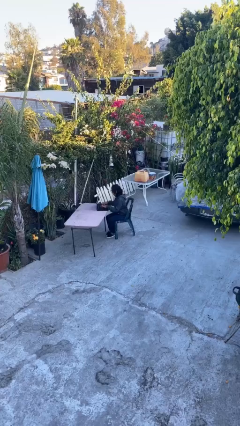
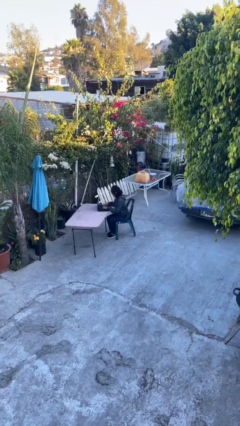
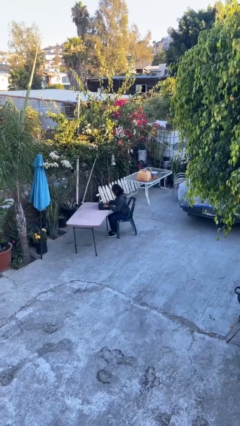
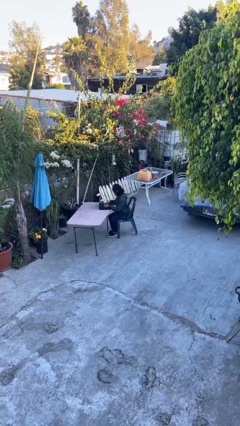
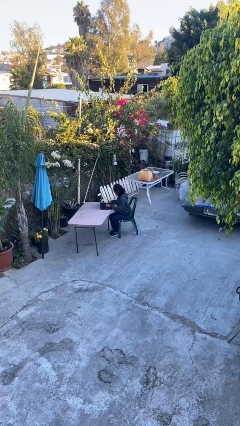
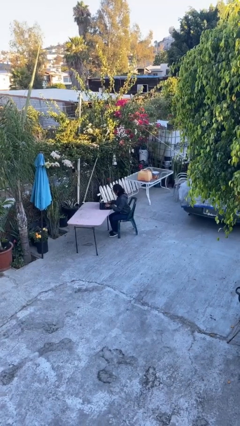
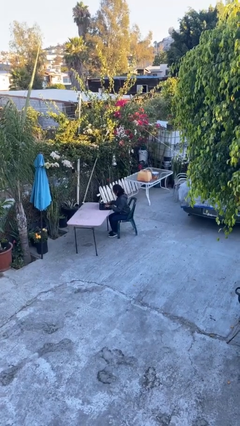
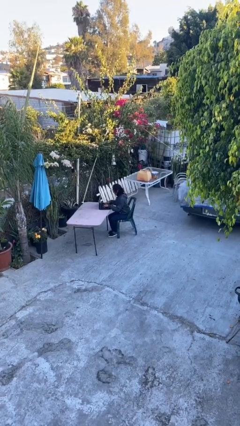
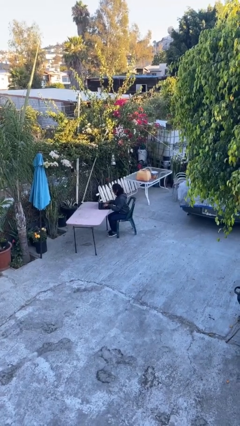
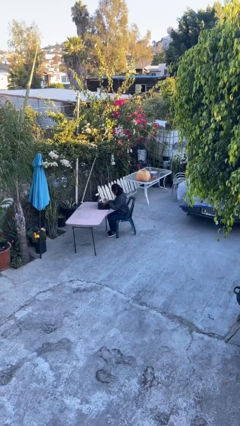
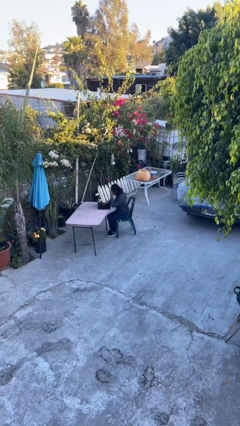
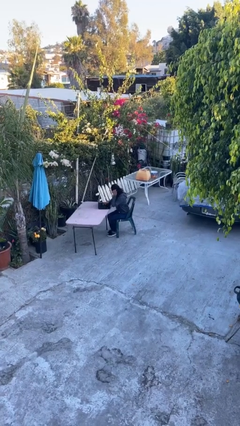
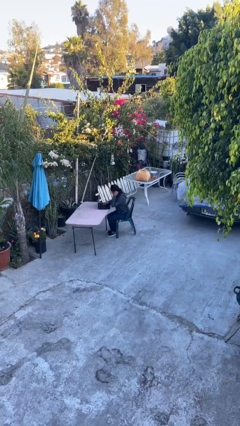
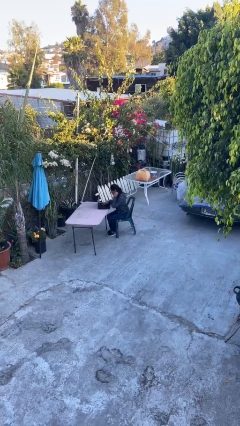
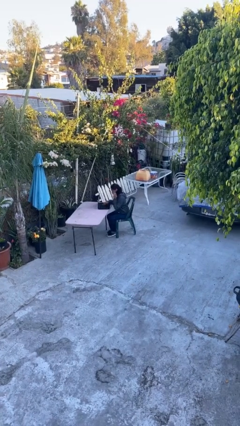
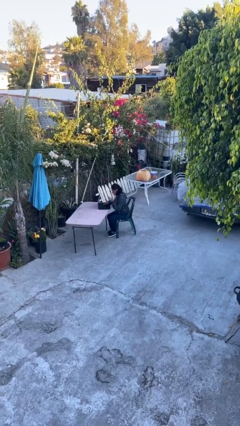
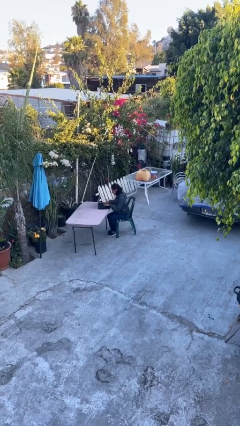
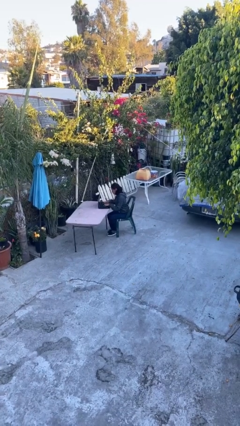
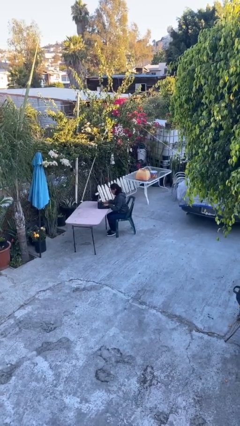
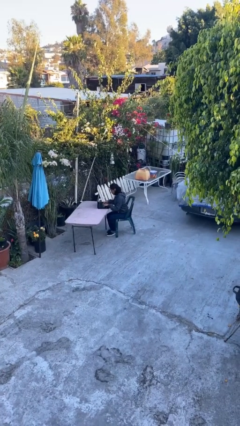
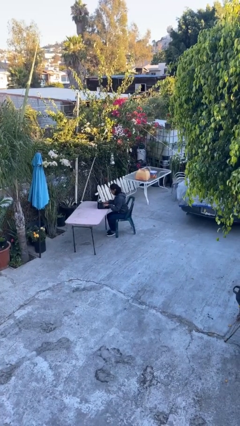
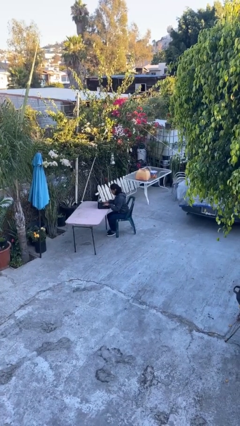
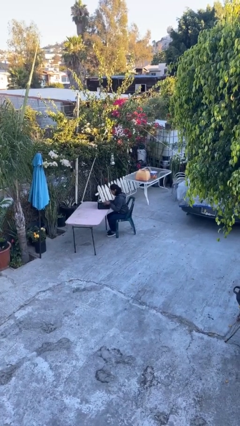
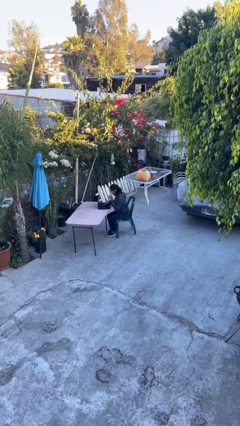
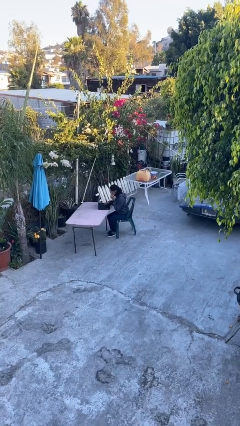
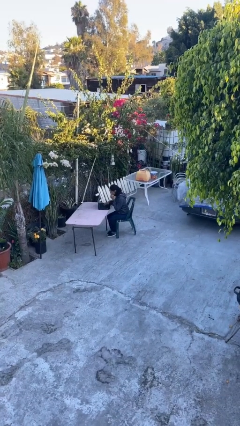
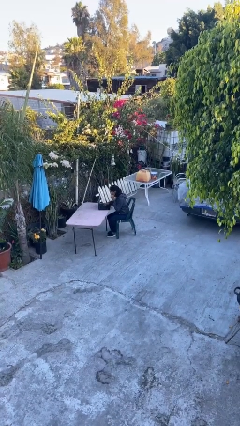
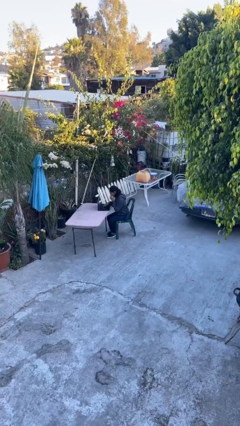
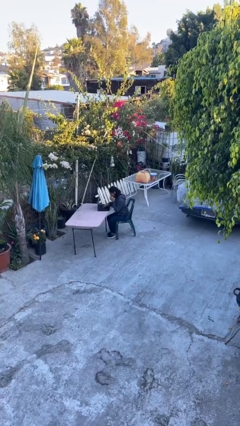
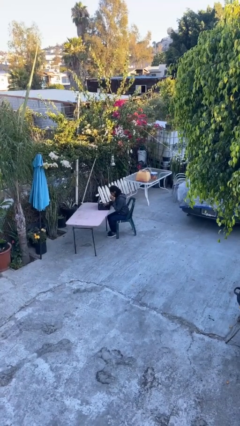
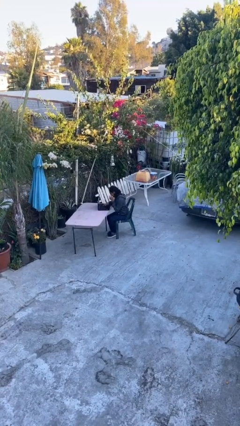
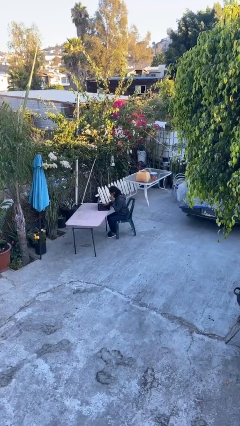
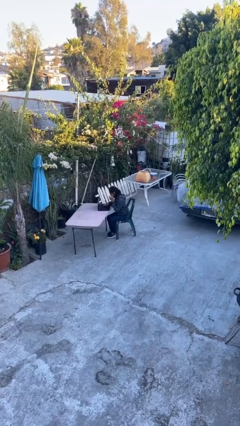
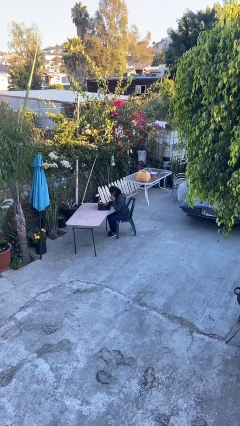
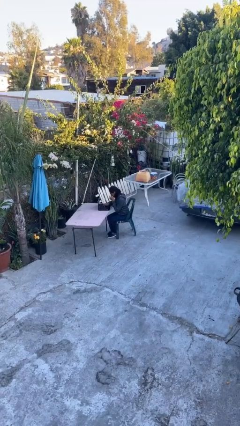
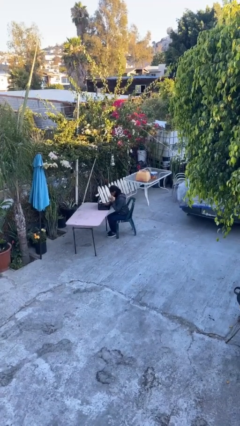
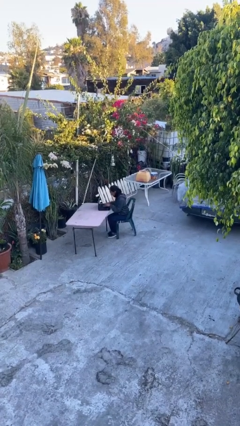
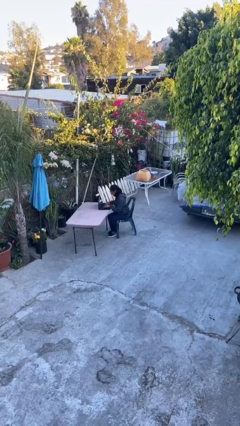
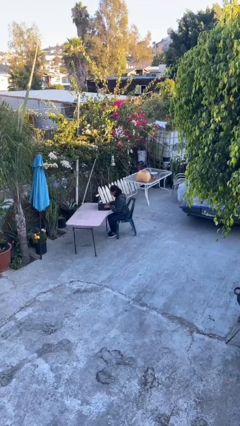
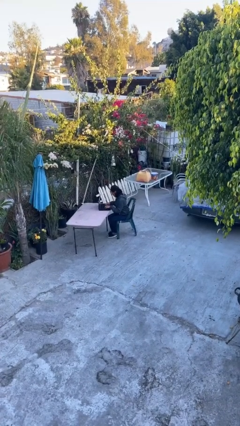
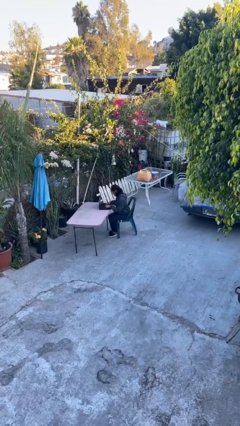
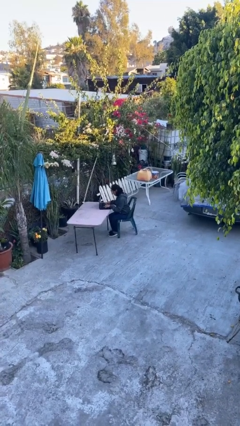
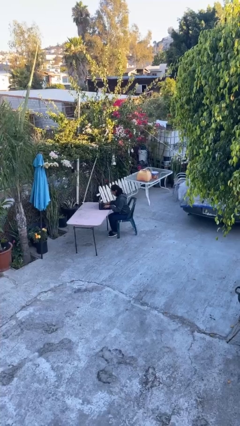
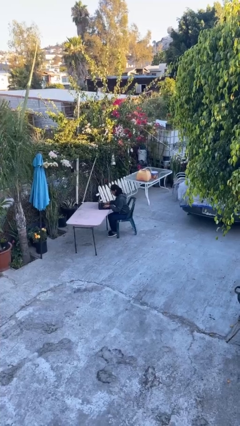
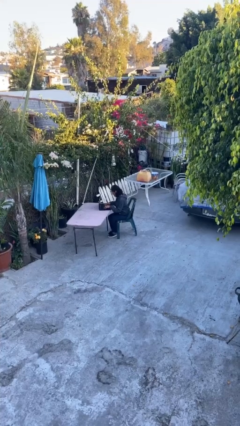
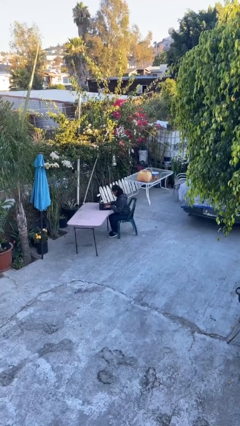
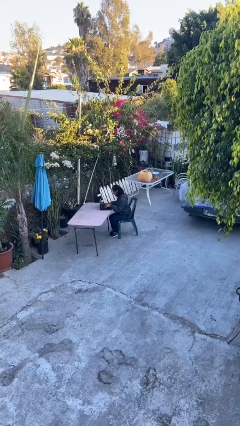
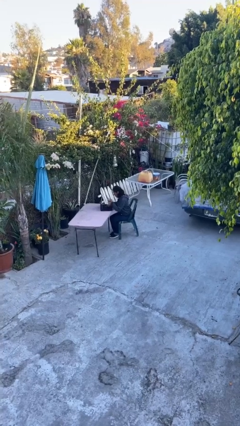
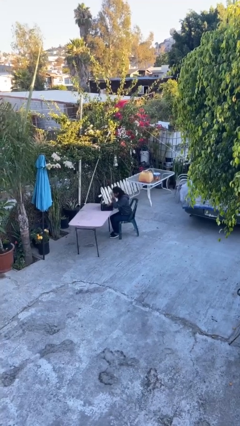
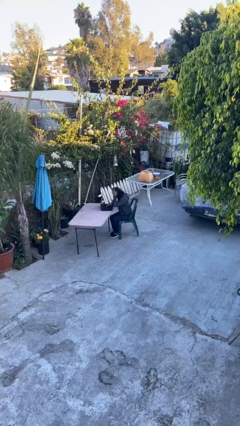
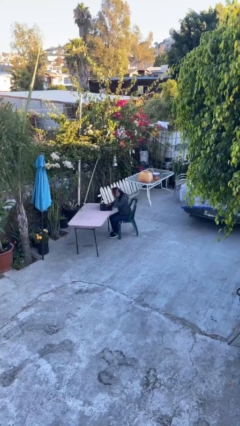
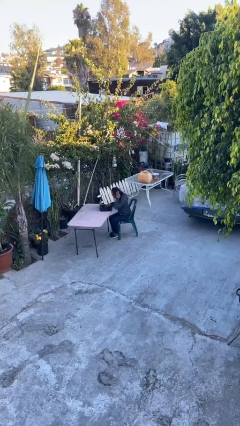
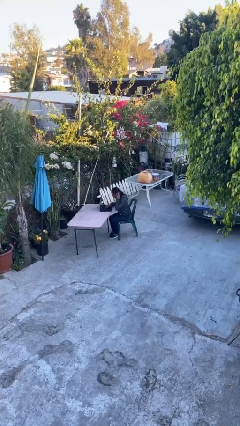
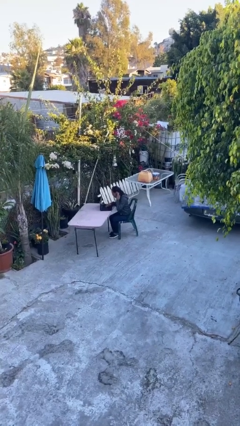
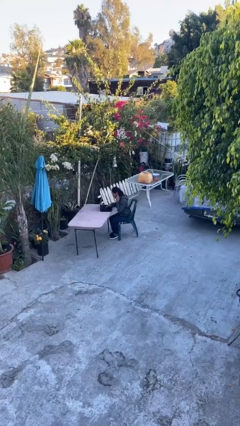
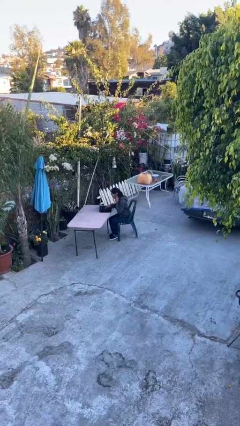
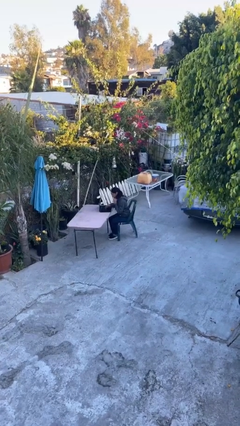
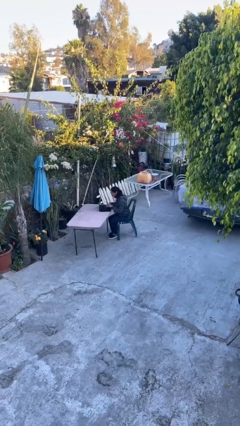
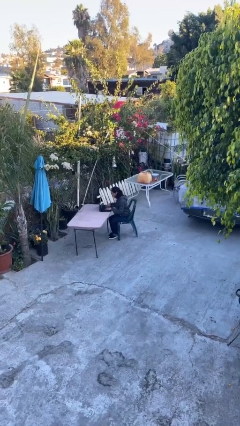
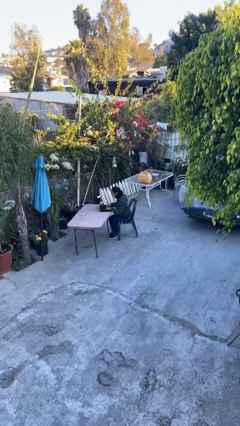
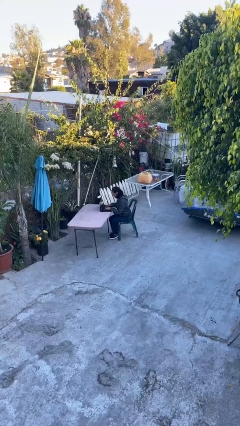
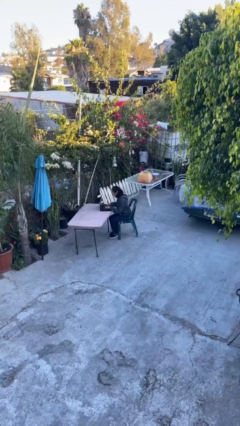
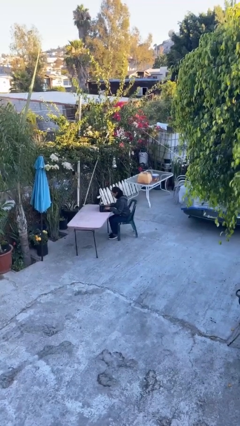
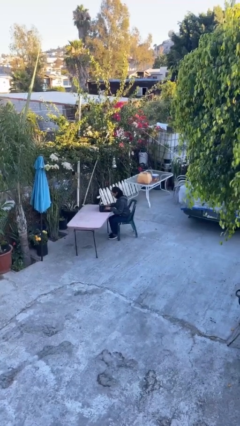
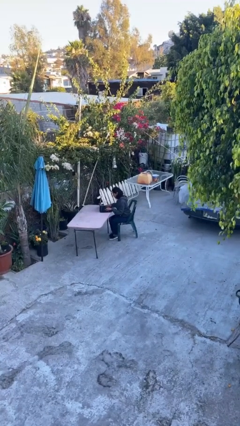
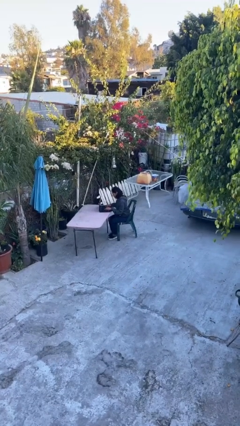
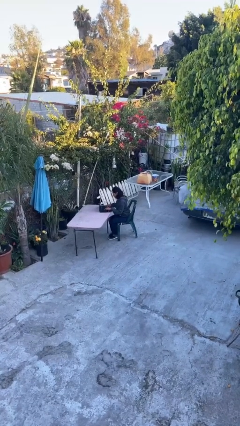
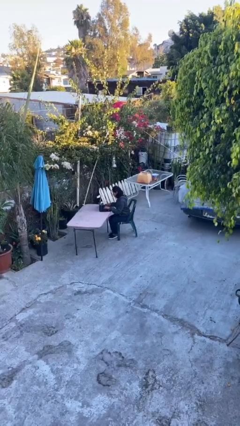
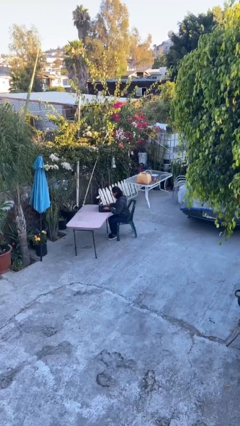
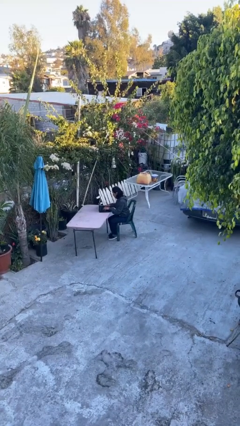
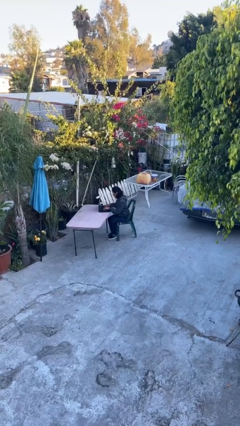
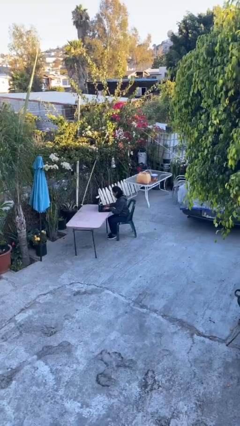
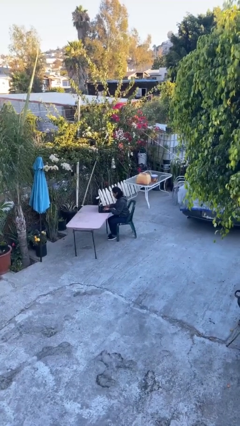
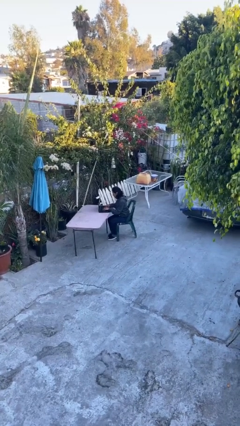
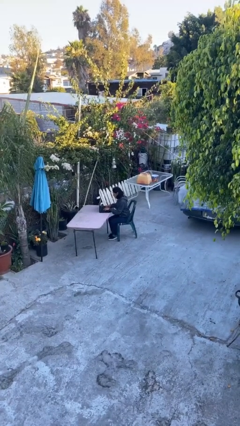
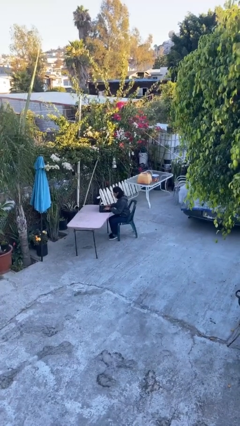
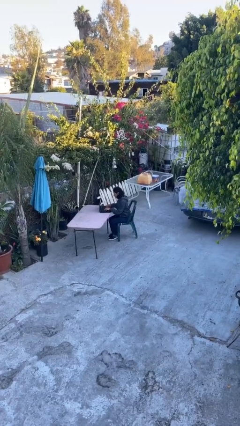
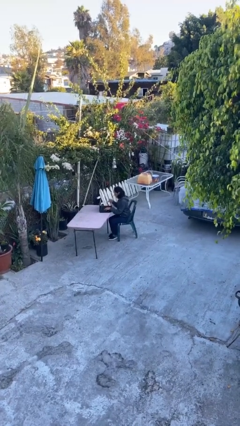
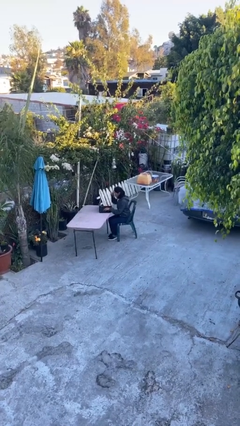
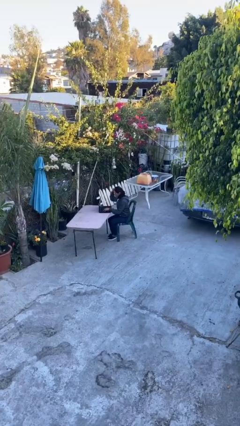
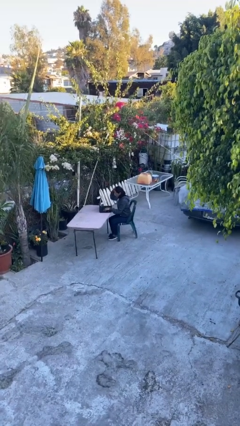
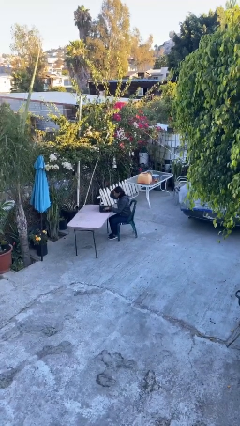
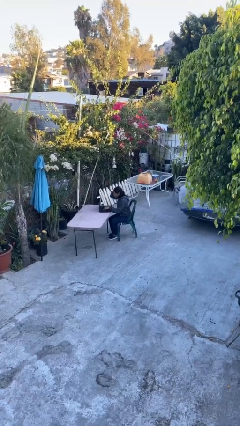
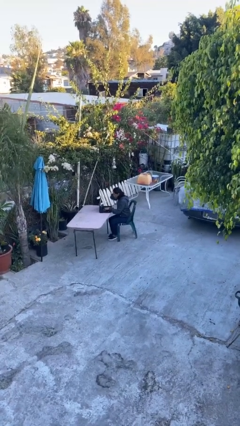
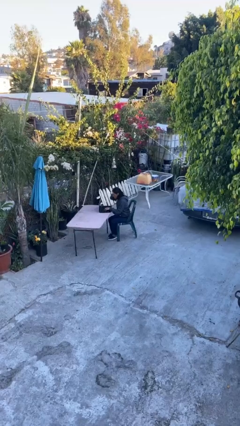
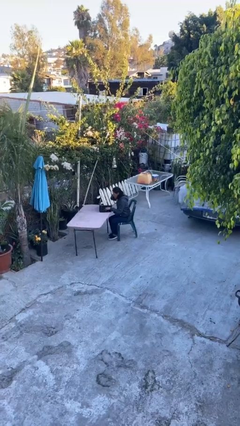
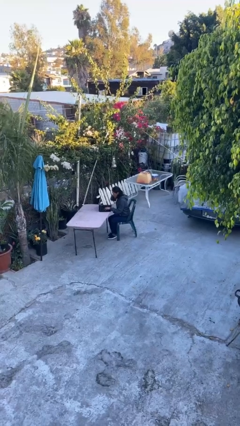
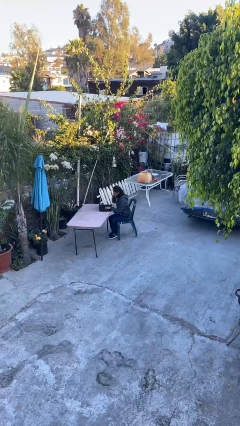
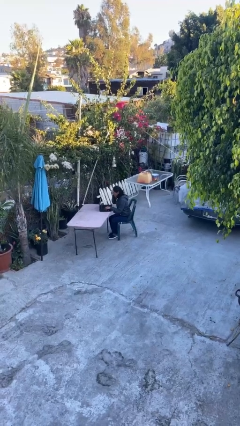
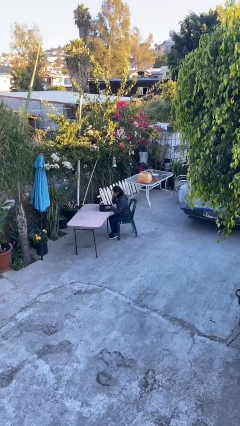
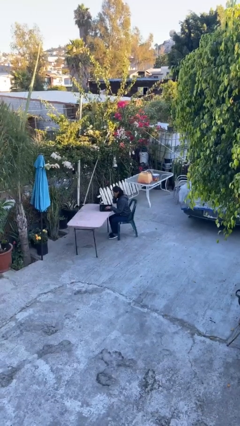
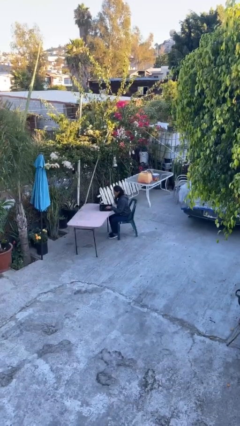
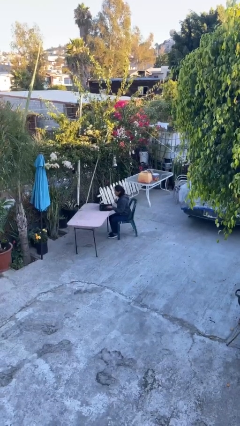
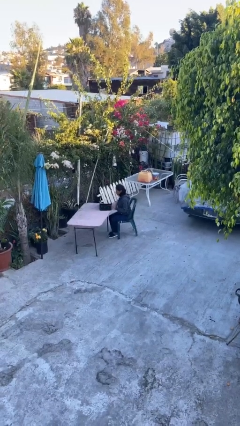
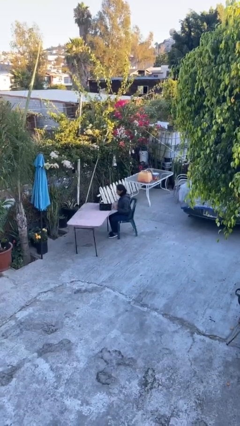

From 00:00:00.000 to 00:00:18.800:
person interacts with laptop
